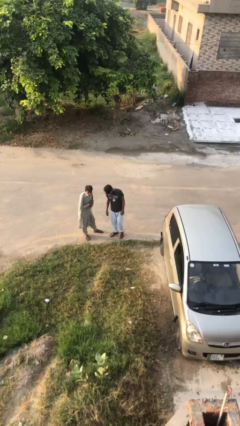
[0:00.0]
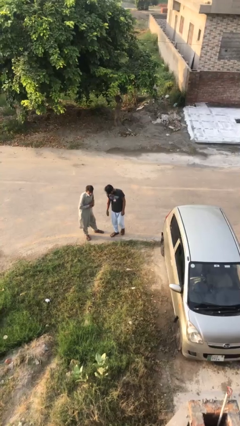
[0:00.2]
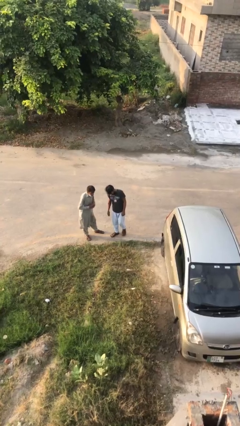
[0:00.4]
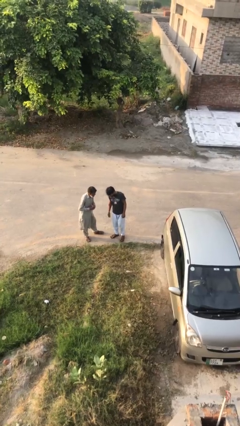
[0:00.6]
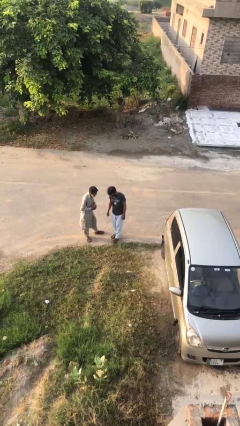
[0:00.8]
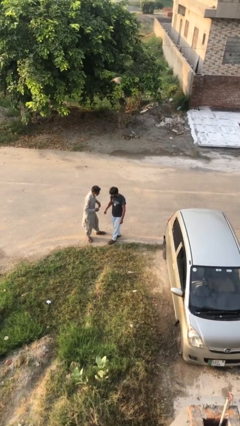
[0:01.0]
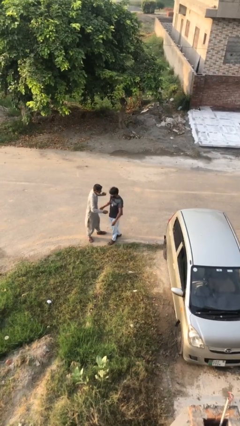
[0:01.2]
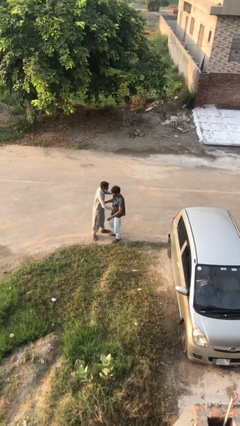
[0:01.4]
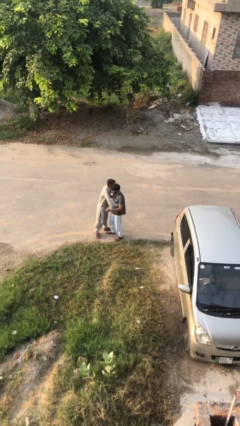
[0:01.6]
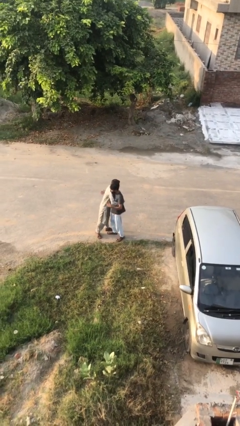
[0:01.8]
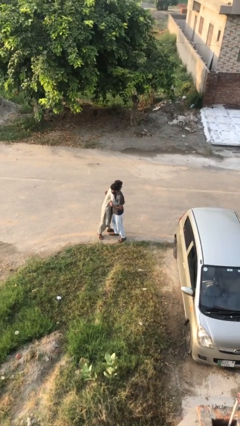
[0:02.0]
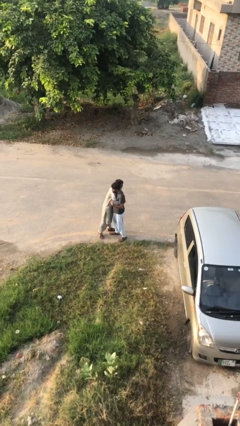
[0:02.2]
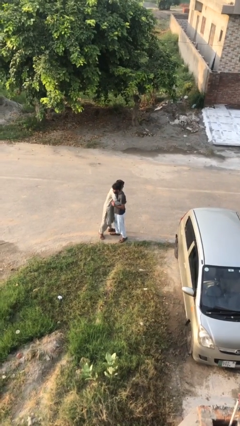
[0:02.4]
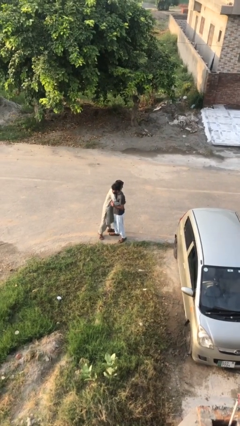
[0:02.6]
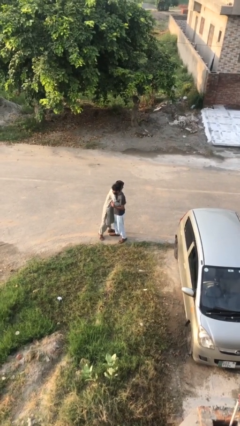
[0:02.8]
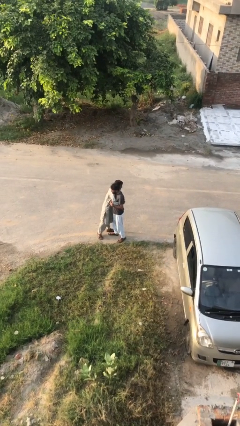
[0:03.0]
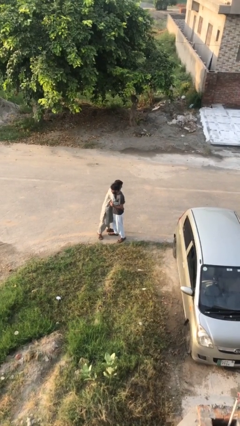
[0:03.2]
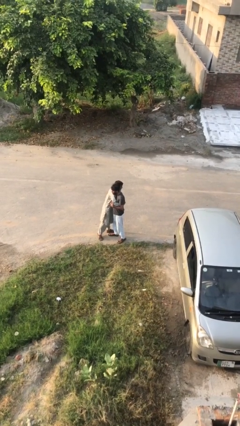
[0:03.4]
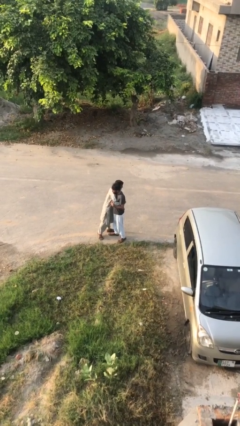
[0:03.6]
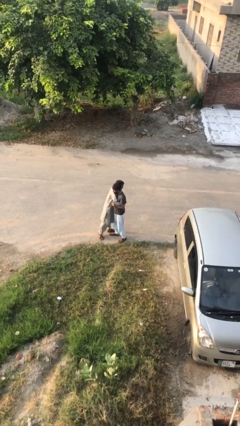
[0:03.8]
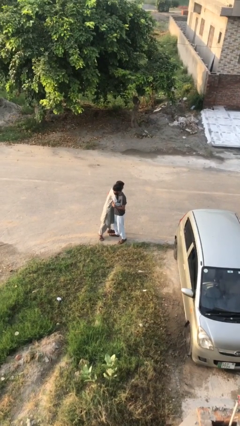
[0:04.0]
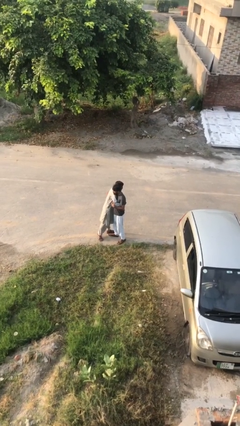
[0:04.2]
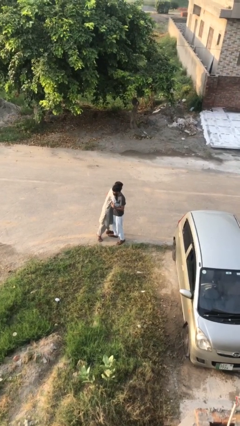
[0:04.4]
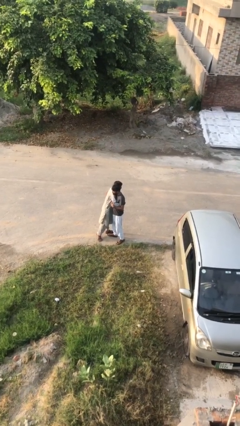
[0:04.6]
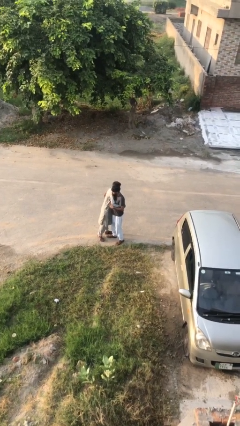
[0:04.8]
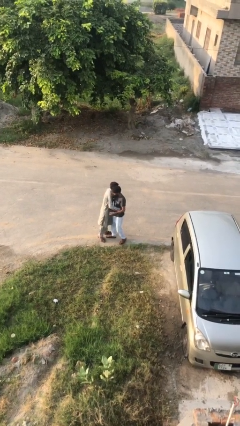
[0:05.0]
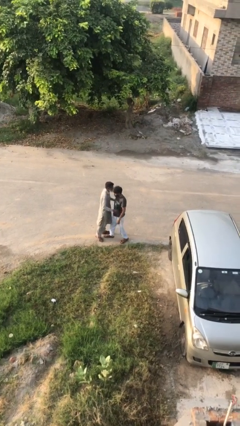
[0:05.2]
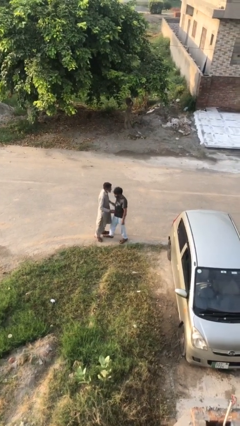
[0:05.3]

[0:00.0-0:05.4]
person embraces person

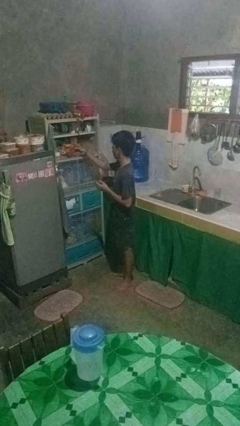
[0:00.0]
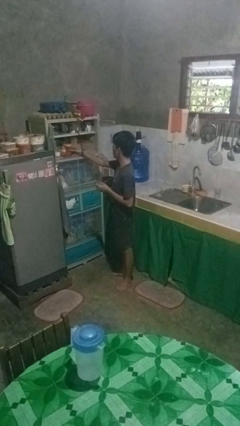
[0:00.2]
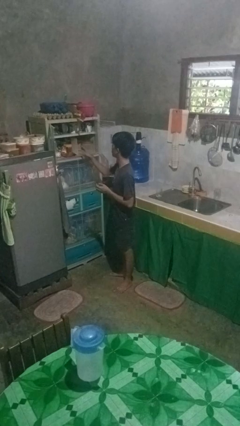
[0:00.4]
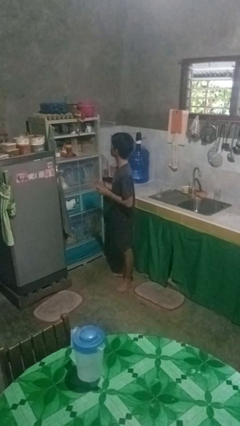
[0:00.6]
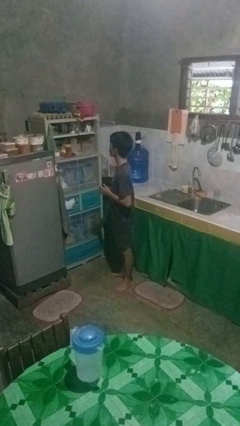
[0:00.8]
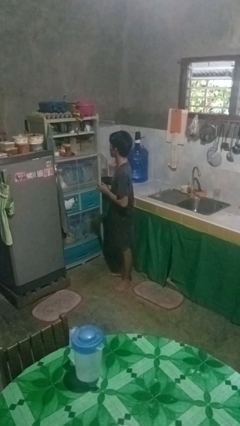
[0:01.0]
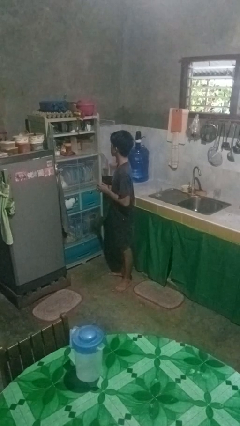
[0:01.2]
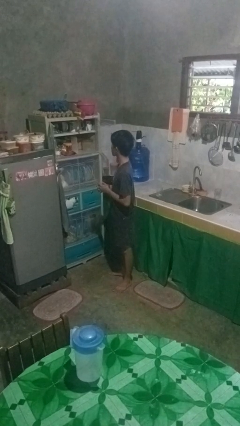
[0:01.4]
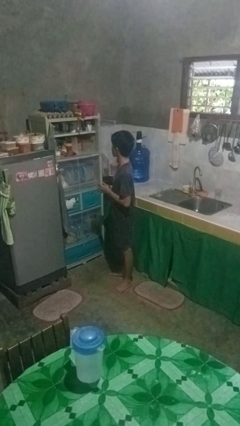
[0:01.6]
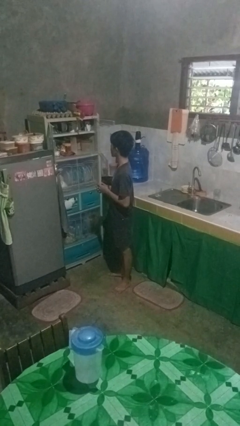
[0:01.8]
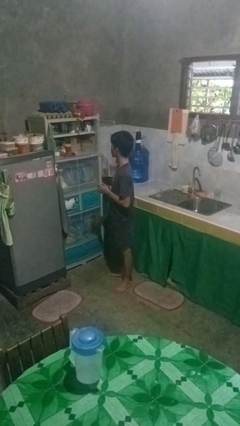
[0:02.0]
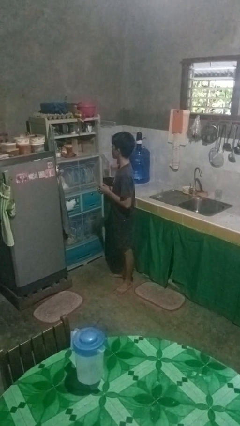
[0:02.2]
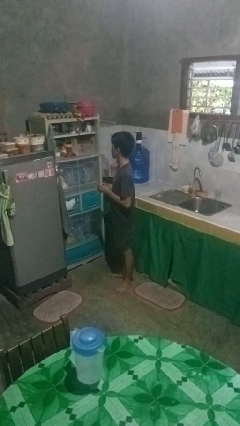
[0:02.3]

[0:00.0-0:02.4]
person puts object in cabinet

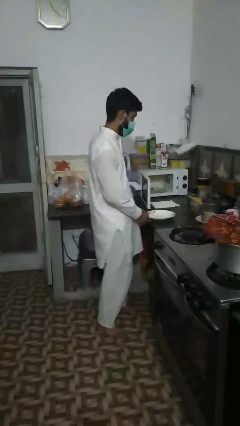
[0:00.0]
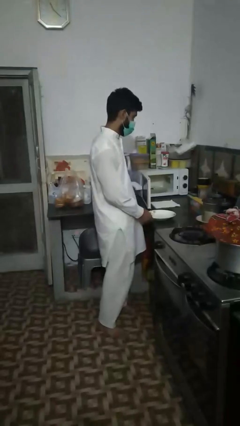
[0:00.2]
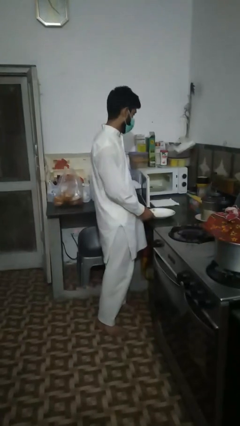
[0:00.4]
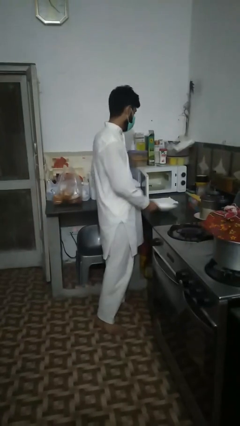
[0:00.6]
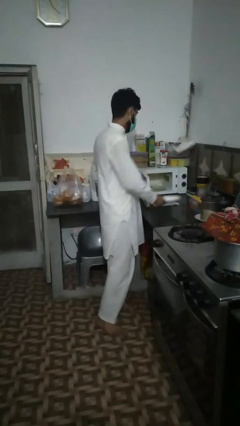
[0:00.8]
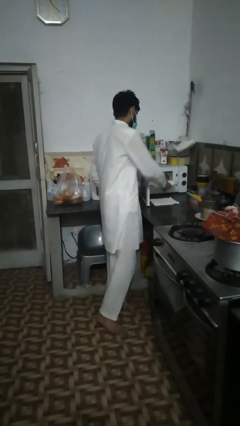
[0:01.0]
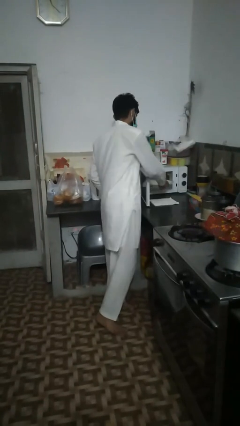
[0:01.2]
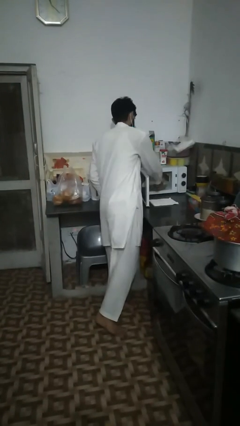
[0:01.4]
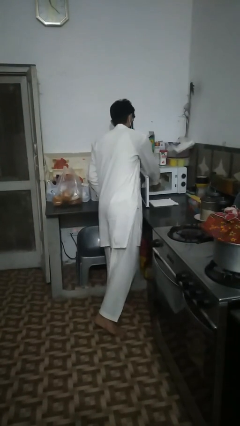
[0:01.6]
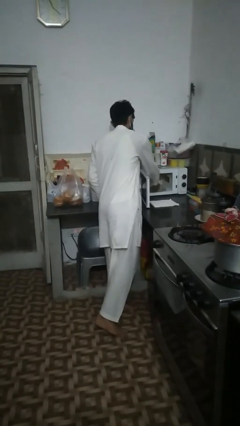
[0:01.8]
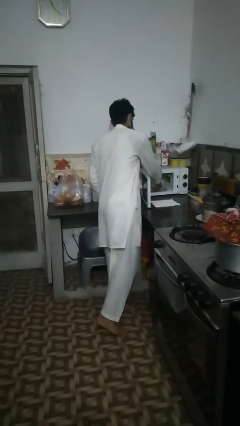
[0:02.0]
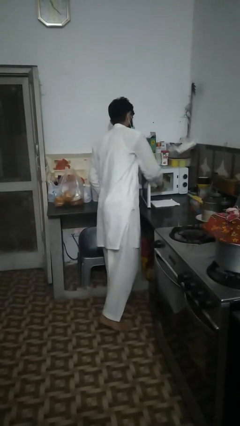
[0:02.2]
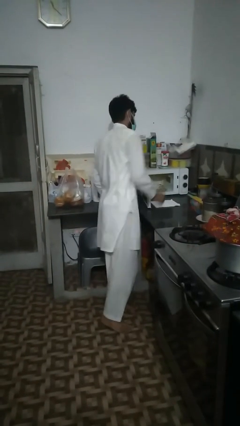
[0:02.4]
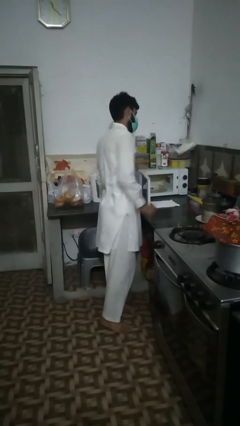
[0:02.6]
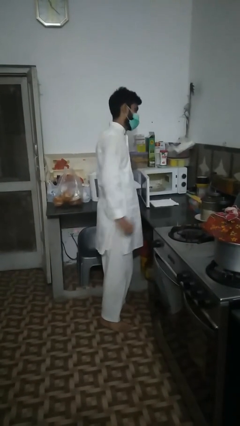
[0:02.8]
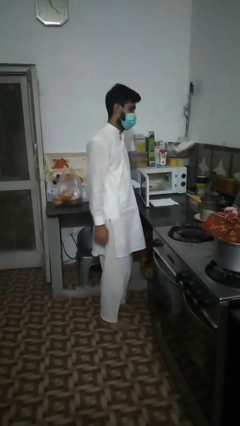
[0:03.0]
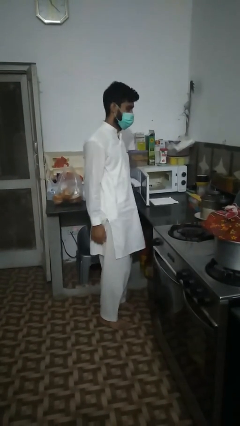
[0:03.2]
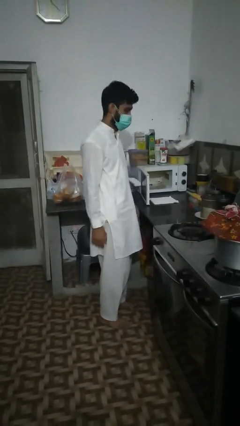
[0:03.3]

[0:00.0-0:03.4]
person puts object into microwave

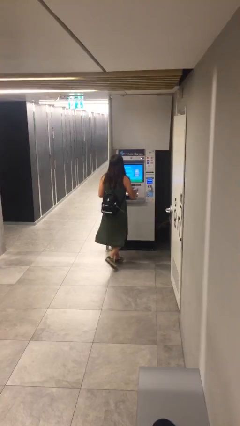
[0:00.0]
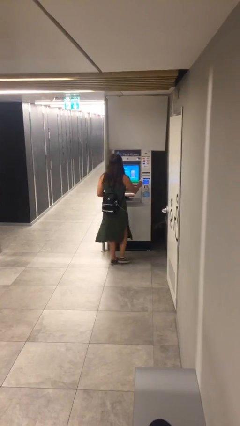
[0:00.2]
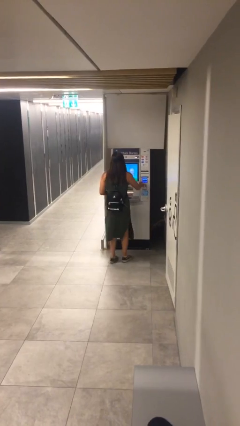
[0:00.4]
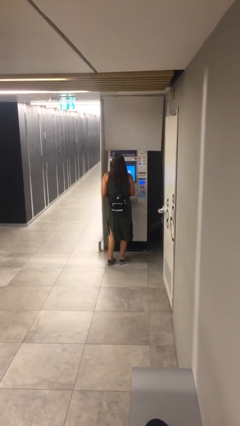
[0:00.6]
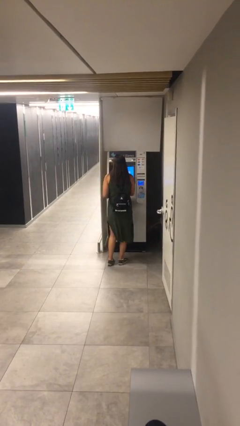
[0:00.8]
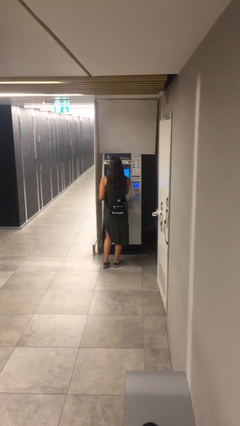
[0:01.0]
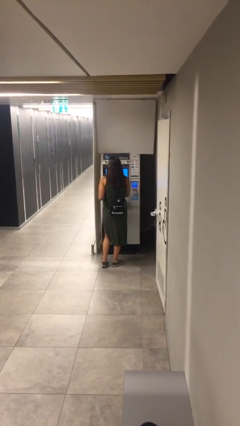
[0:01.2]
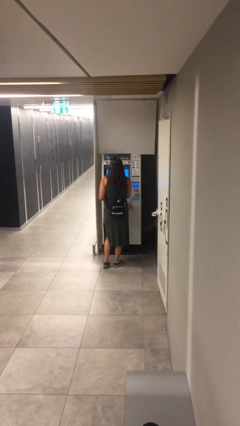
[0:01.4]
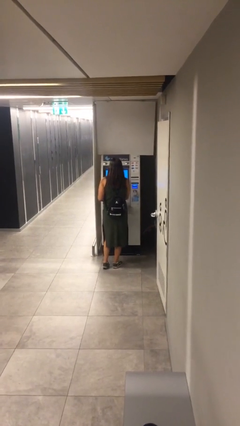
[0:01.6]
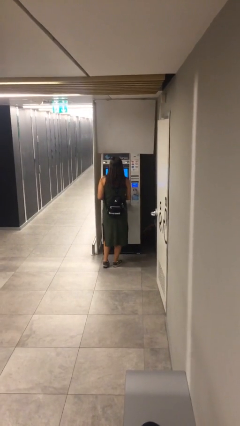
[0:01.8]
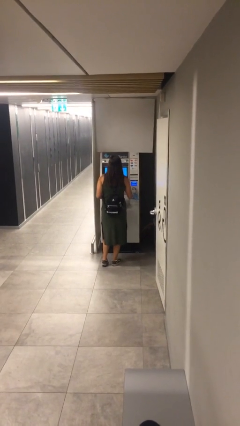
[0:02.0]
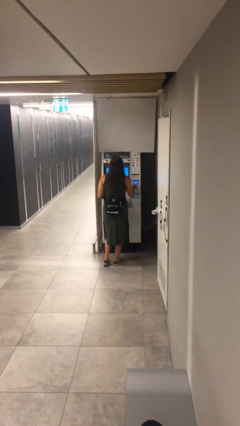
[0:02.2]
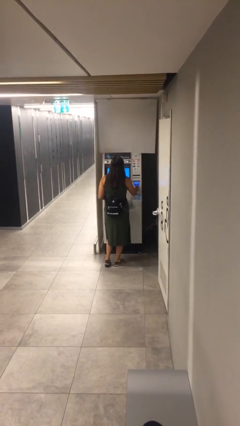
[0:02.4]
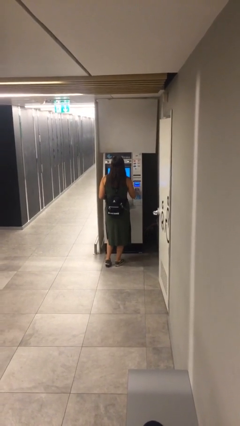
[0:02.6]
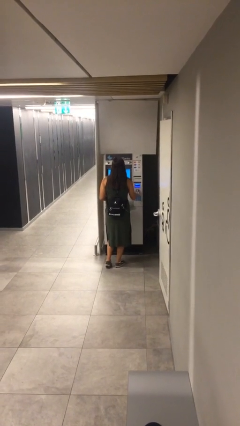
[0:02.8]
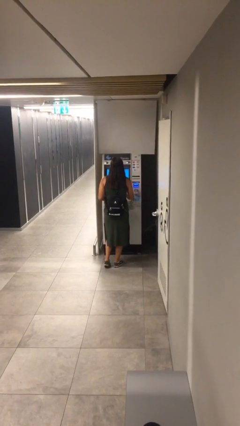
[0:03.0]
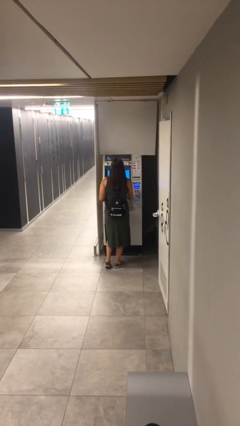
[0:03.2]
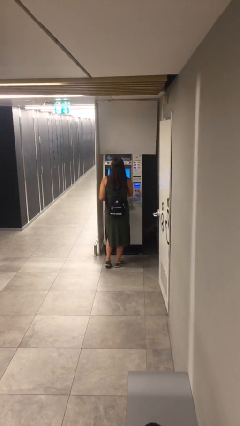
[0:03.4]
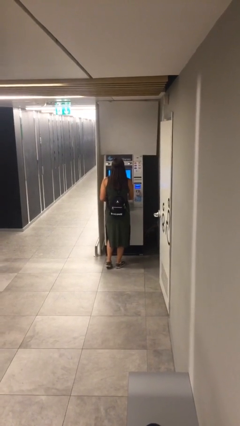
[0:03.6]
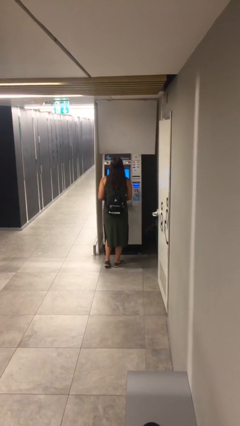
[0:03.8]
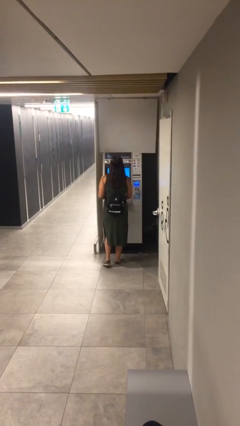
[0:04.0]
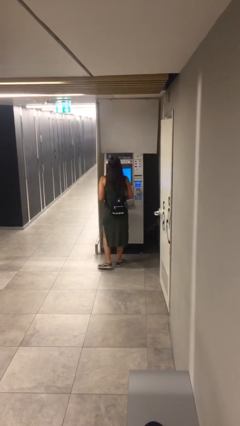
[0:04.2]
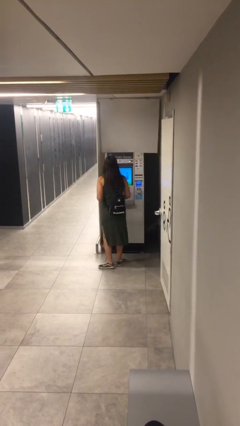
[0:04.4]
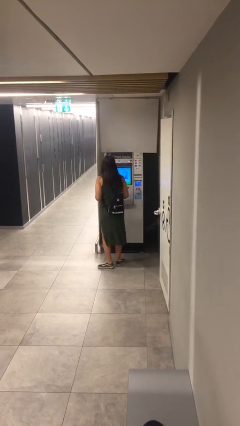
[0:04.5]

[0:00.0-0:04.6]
person purchases from machine

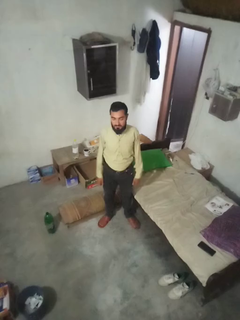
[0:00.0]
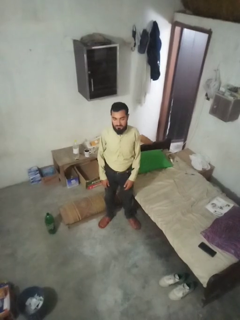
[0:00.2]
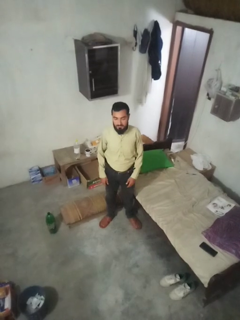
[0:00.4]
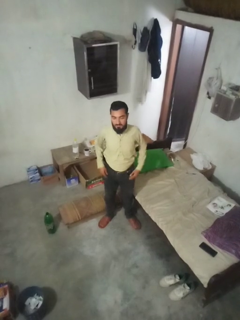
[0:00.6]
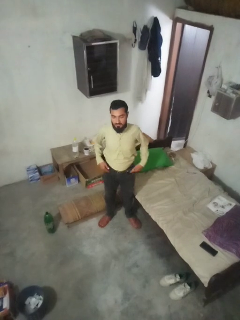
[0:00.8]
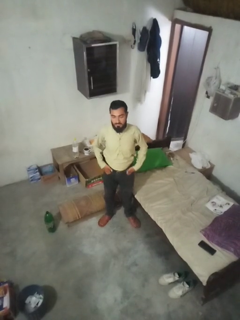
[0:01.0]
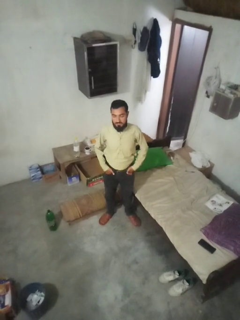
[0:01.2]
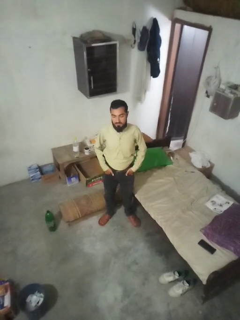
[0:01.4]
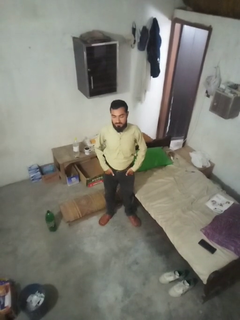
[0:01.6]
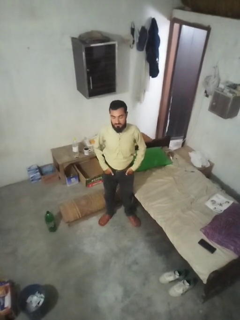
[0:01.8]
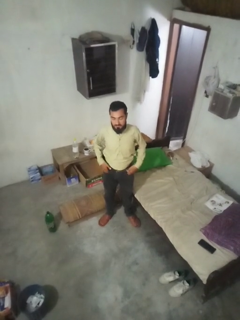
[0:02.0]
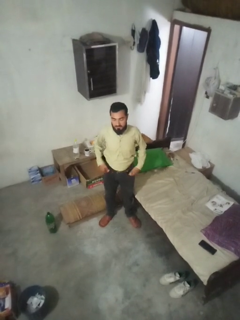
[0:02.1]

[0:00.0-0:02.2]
person puts hands in back pockets
